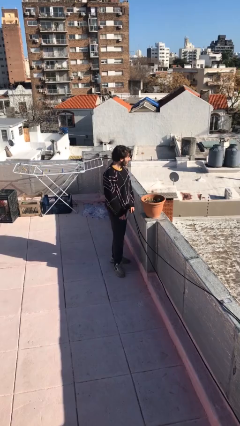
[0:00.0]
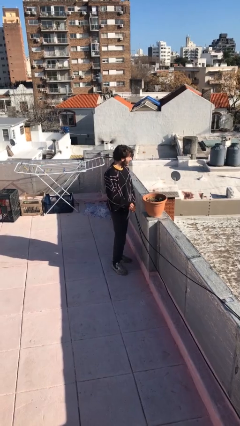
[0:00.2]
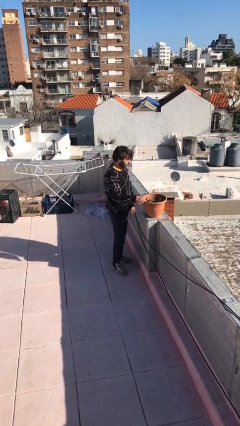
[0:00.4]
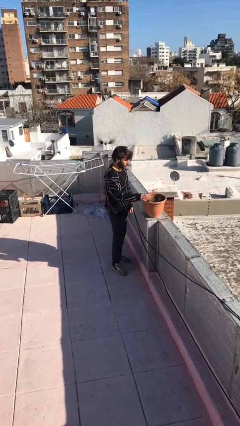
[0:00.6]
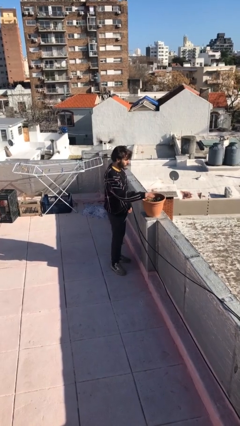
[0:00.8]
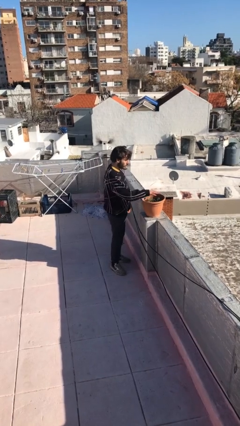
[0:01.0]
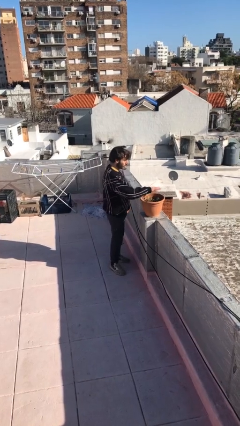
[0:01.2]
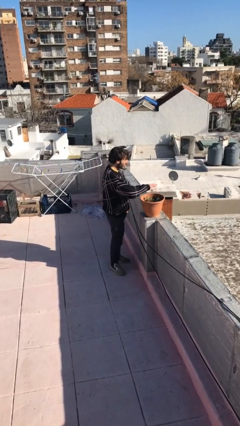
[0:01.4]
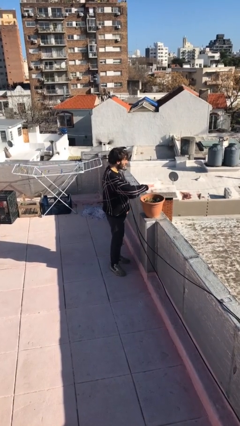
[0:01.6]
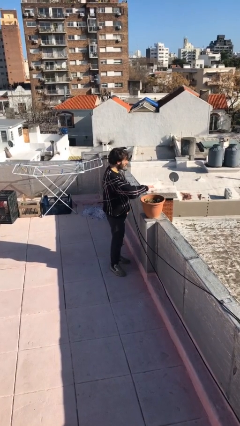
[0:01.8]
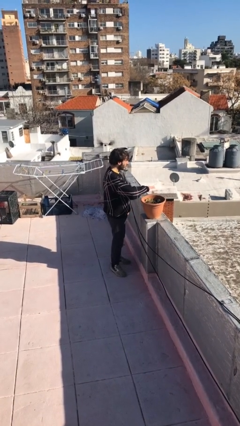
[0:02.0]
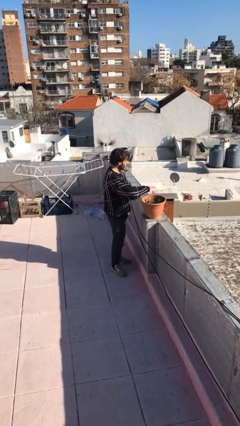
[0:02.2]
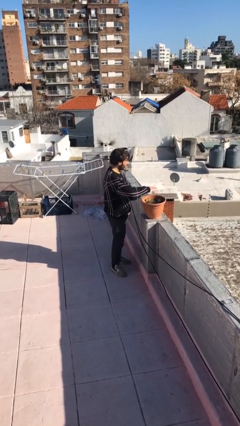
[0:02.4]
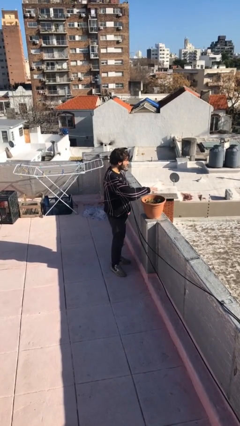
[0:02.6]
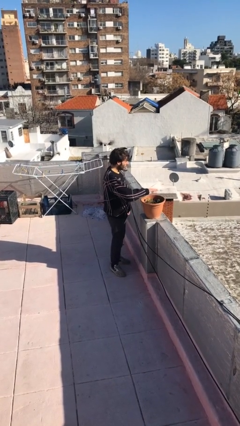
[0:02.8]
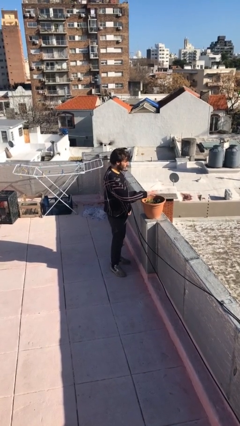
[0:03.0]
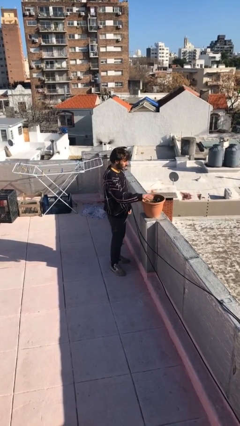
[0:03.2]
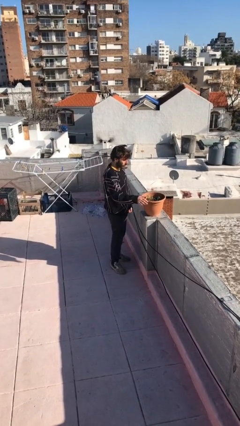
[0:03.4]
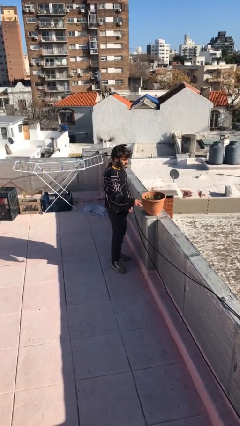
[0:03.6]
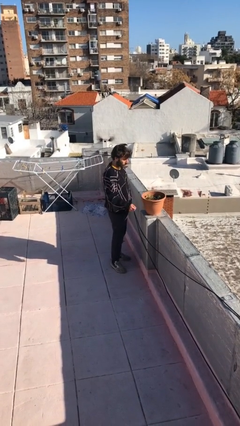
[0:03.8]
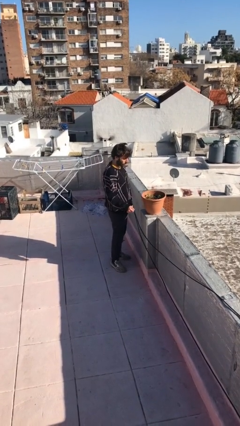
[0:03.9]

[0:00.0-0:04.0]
person waves hand over object

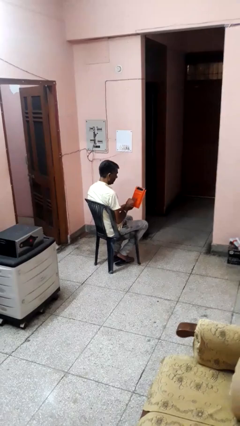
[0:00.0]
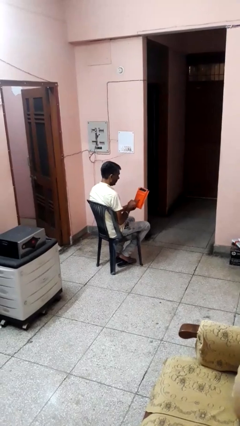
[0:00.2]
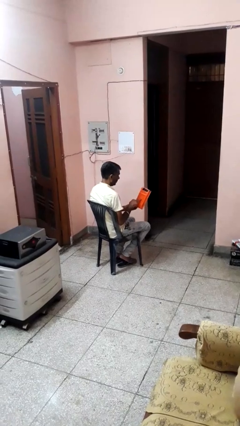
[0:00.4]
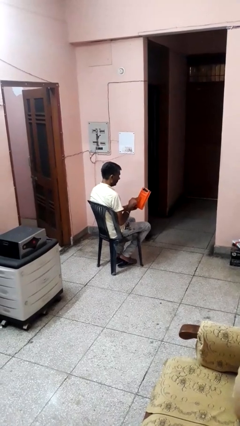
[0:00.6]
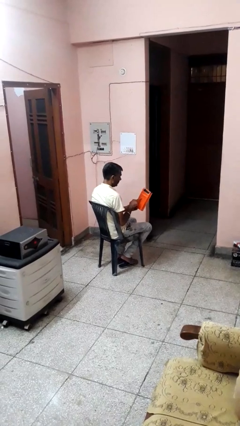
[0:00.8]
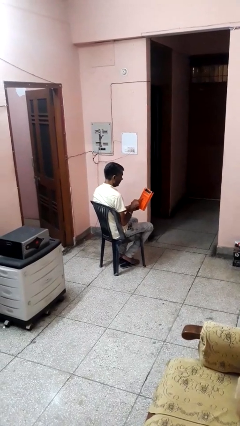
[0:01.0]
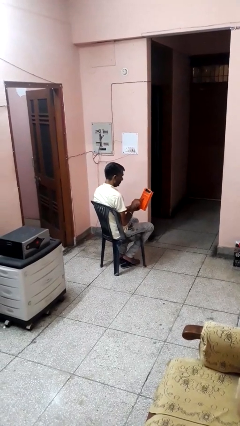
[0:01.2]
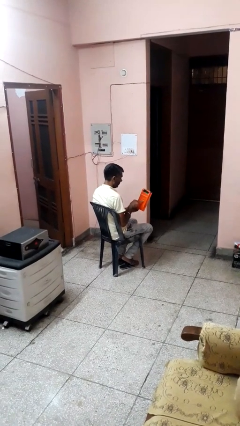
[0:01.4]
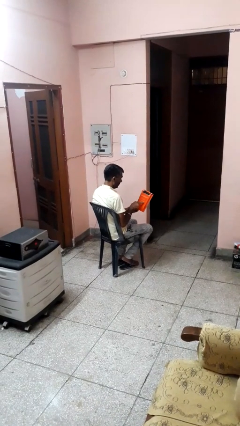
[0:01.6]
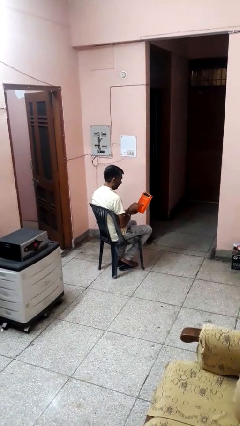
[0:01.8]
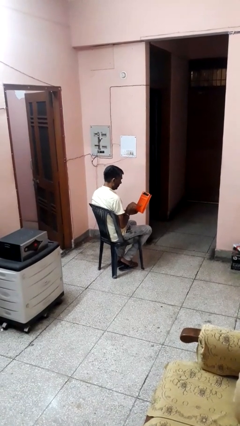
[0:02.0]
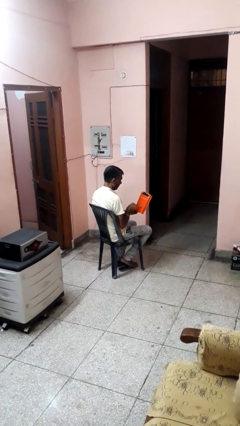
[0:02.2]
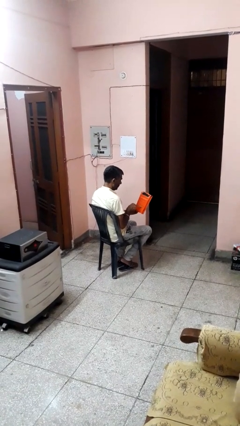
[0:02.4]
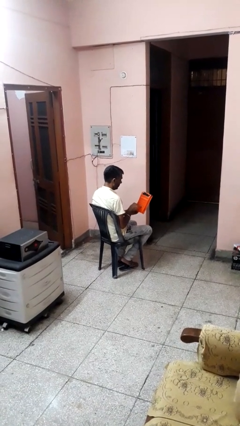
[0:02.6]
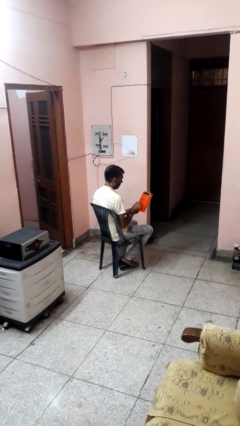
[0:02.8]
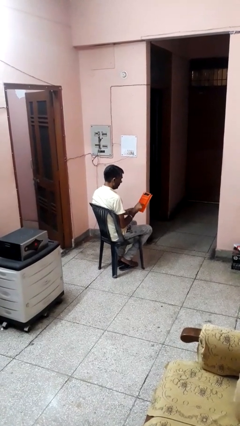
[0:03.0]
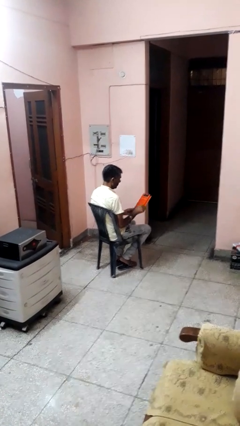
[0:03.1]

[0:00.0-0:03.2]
person taps object with finger

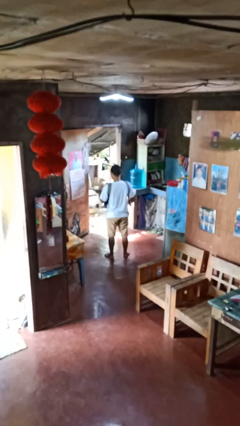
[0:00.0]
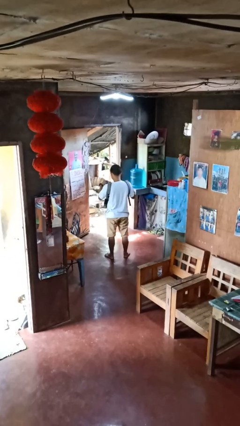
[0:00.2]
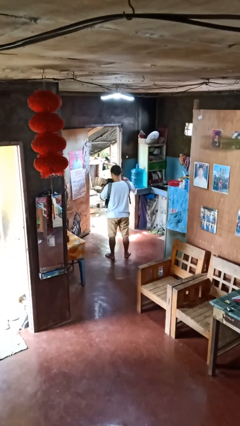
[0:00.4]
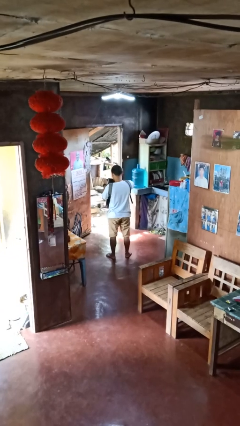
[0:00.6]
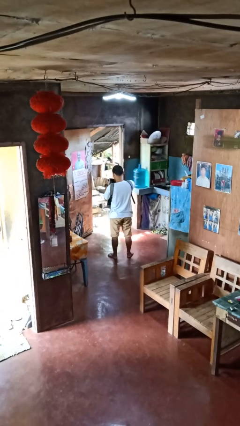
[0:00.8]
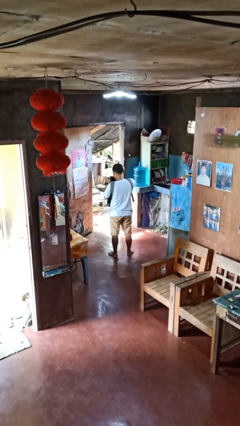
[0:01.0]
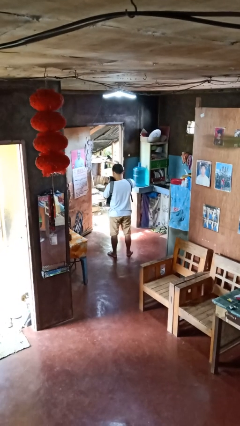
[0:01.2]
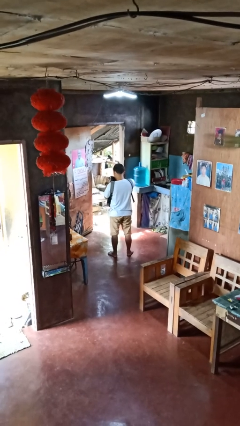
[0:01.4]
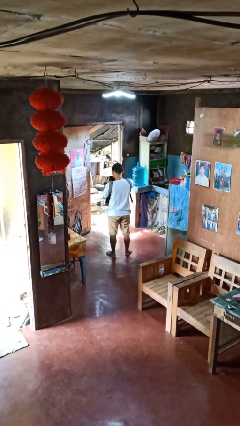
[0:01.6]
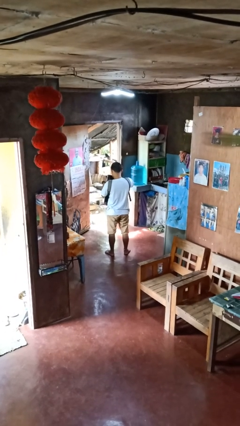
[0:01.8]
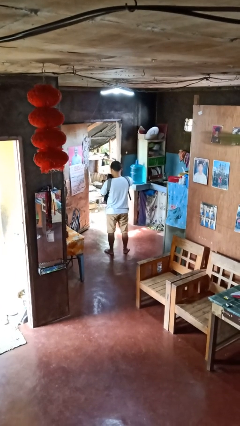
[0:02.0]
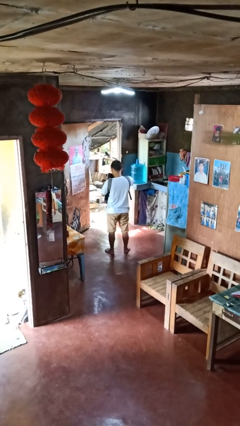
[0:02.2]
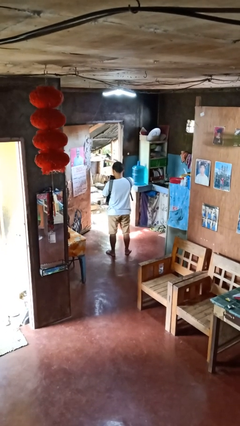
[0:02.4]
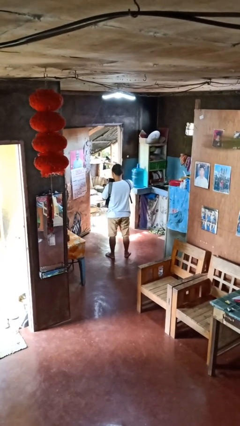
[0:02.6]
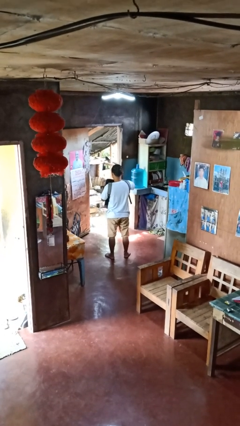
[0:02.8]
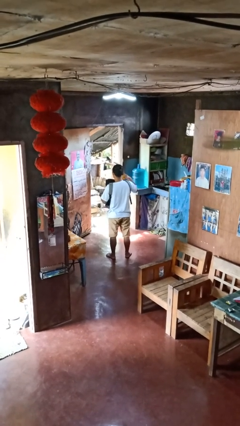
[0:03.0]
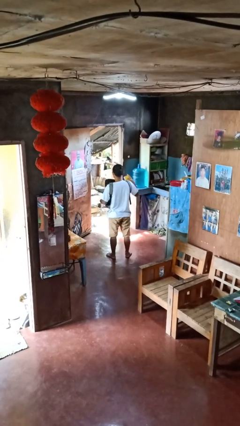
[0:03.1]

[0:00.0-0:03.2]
person searches in backpack

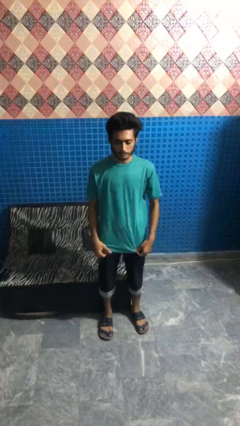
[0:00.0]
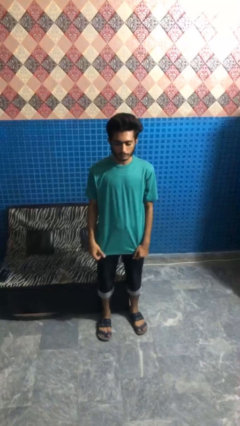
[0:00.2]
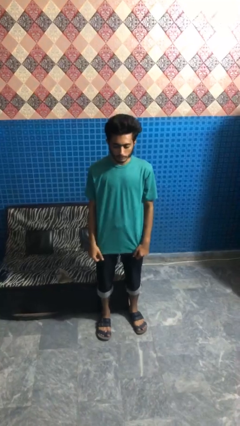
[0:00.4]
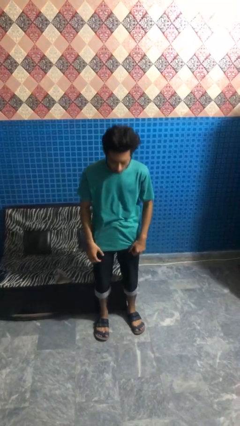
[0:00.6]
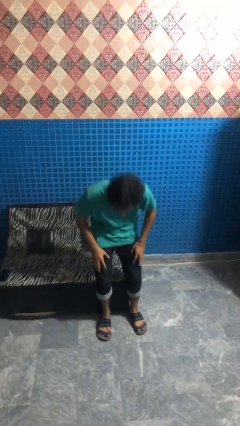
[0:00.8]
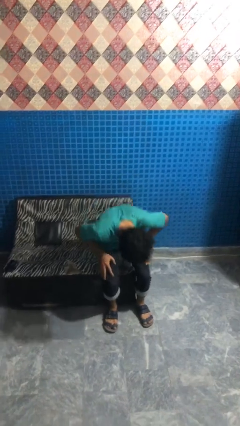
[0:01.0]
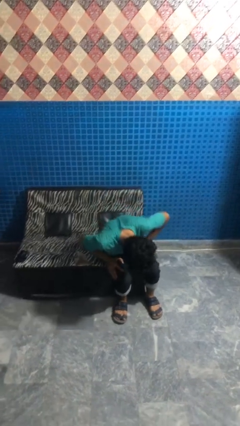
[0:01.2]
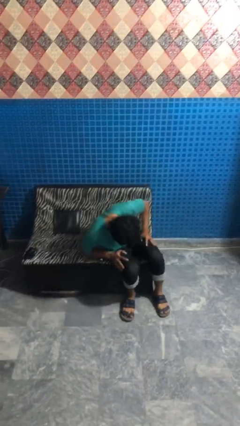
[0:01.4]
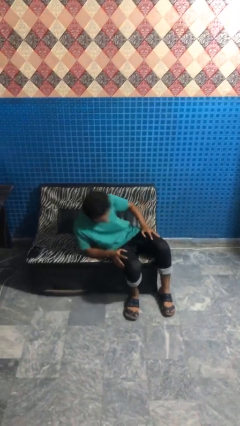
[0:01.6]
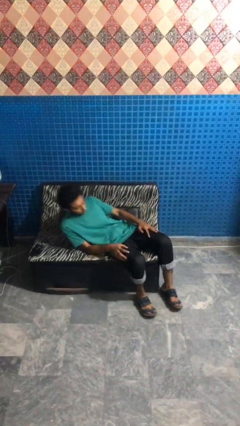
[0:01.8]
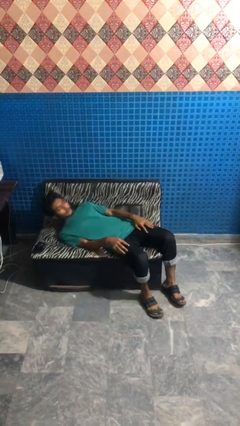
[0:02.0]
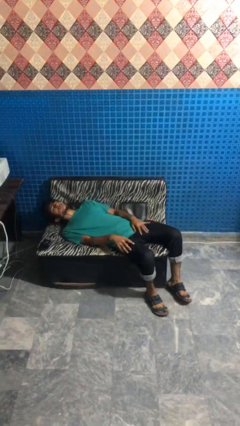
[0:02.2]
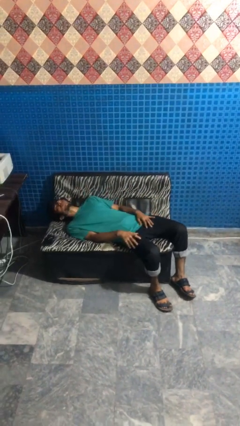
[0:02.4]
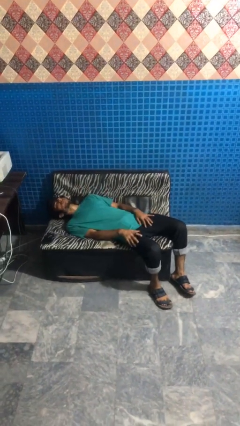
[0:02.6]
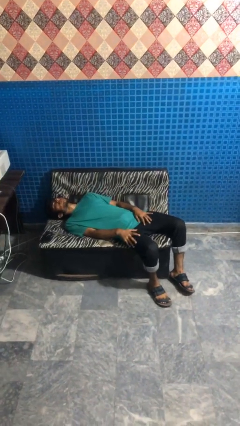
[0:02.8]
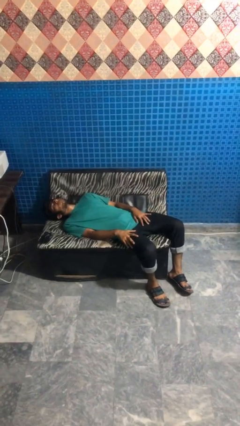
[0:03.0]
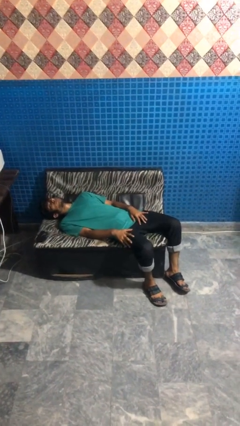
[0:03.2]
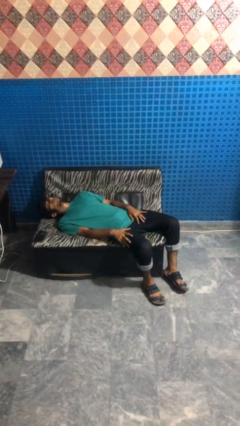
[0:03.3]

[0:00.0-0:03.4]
person lies down on couch

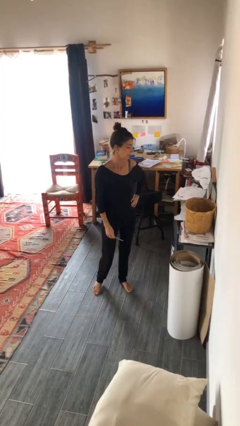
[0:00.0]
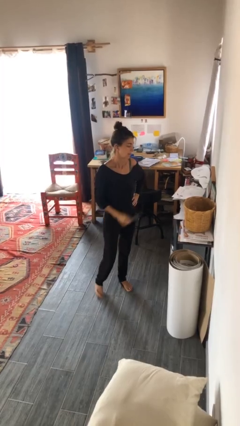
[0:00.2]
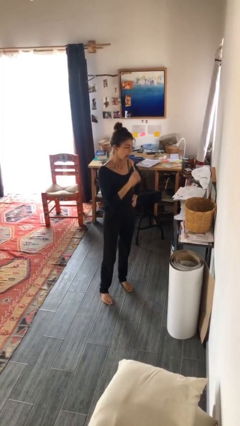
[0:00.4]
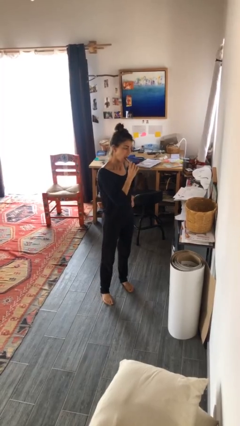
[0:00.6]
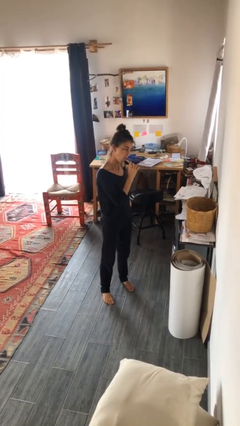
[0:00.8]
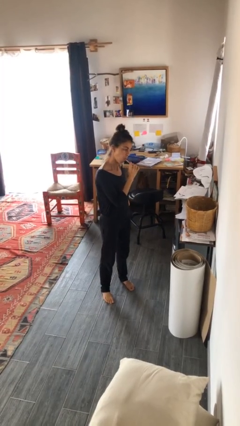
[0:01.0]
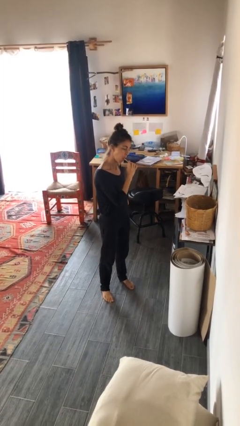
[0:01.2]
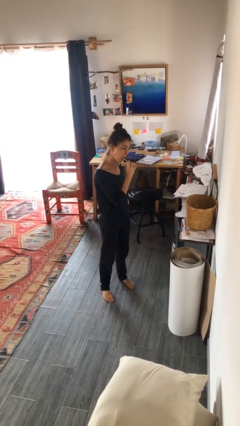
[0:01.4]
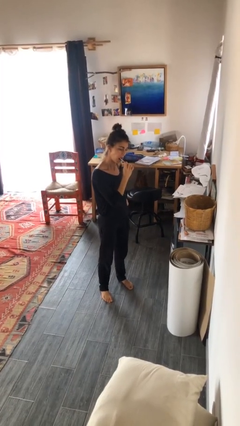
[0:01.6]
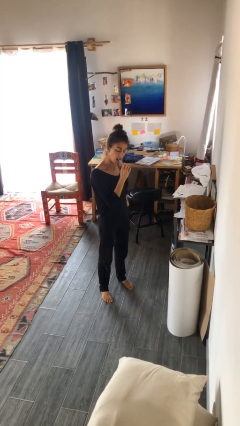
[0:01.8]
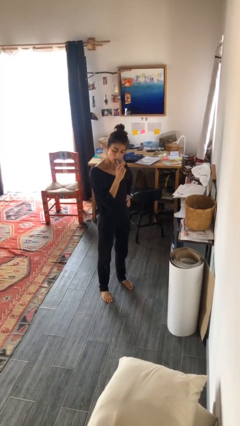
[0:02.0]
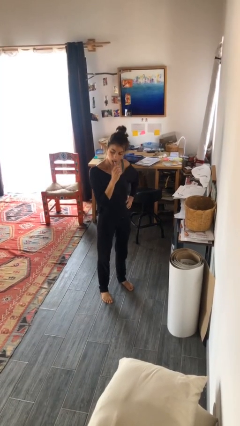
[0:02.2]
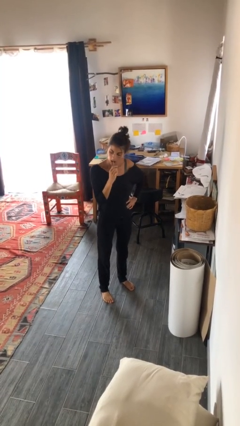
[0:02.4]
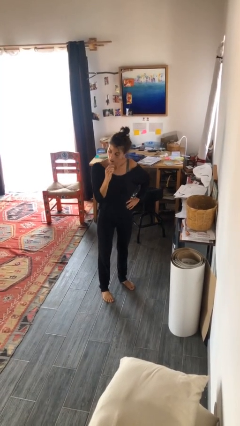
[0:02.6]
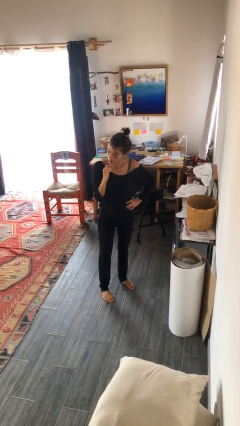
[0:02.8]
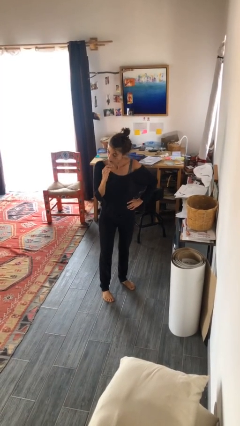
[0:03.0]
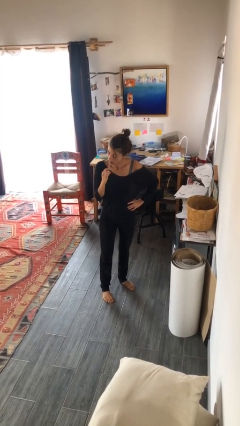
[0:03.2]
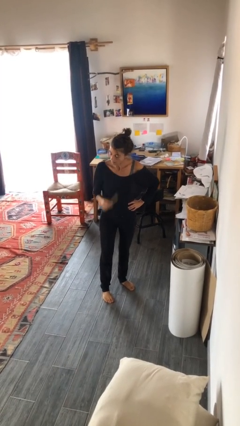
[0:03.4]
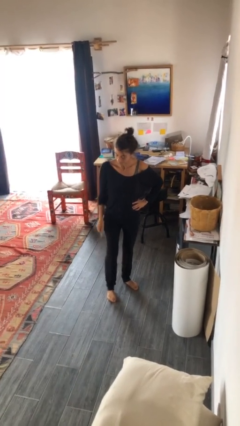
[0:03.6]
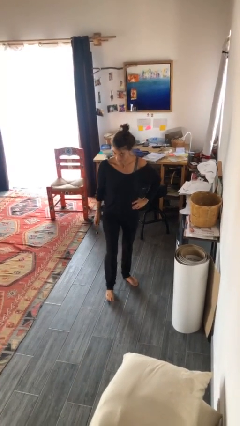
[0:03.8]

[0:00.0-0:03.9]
person brushes teeth

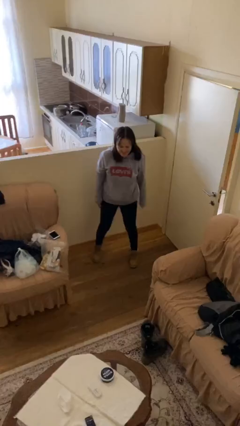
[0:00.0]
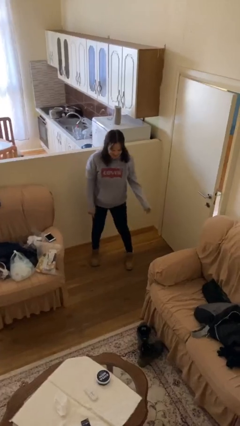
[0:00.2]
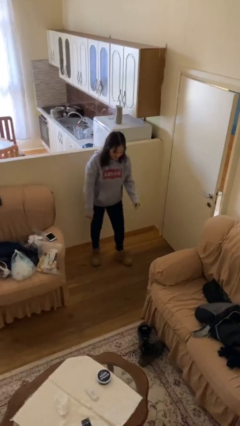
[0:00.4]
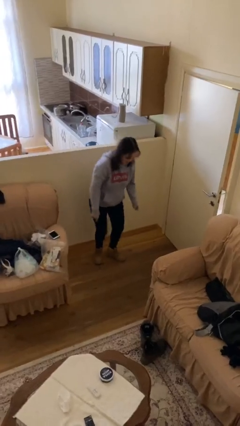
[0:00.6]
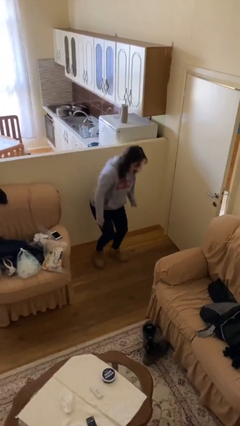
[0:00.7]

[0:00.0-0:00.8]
person stands up
